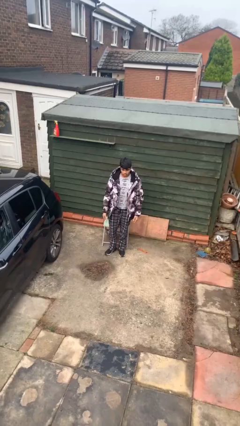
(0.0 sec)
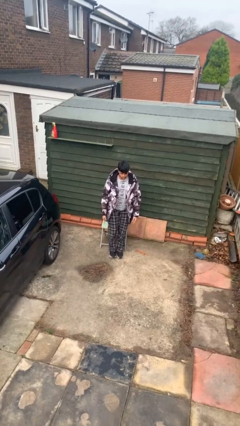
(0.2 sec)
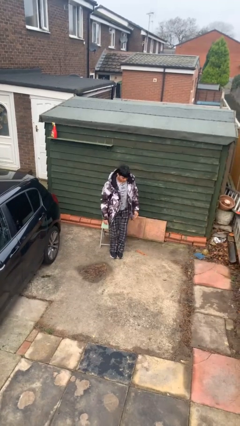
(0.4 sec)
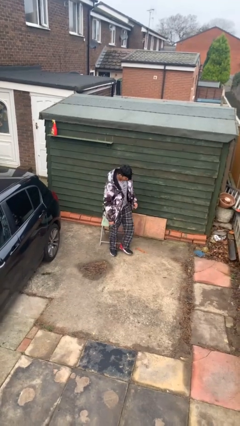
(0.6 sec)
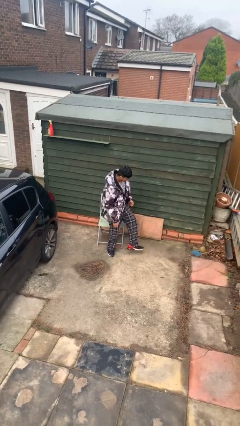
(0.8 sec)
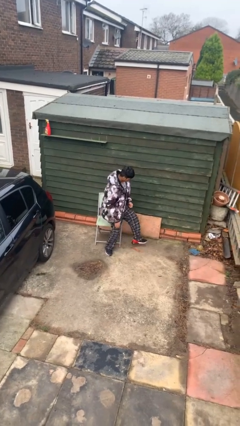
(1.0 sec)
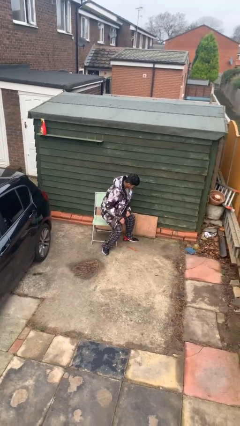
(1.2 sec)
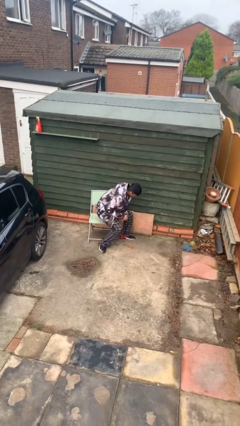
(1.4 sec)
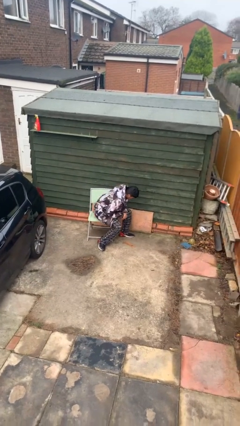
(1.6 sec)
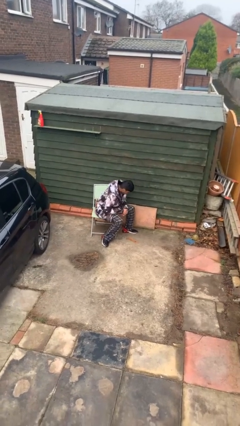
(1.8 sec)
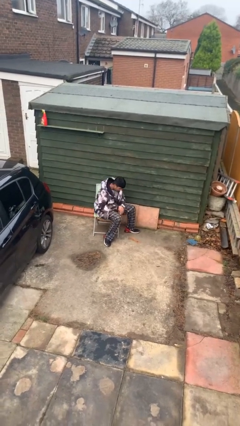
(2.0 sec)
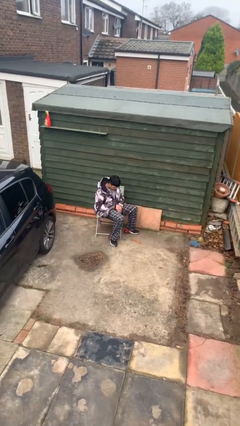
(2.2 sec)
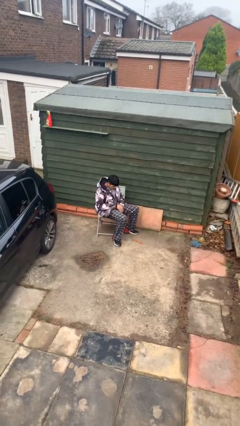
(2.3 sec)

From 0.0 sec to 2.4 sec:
person sits down

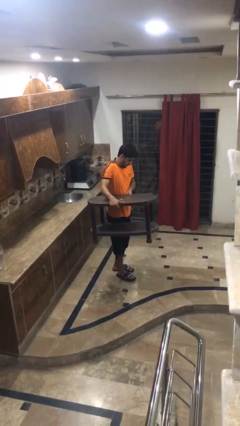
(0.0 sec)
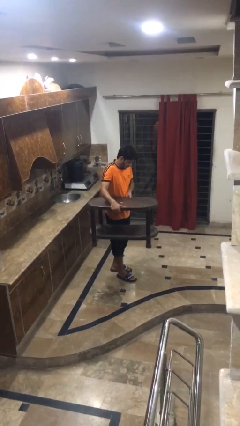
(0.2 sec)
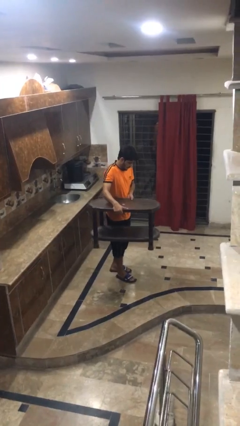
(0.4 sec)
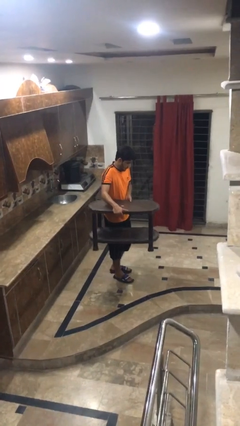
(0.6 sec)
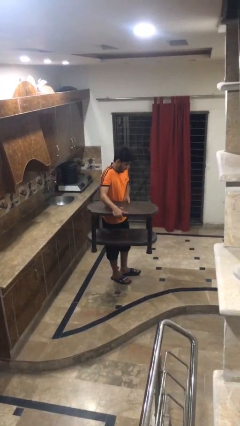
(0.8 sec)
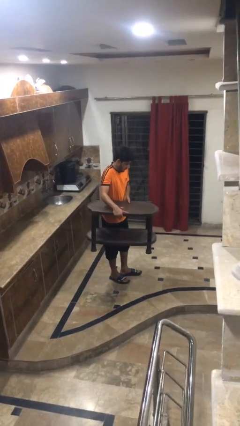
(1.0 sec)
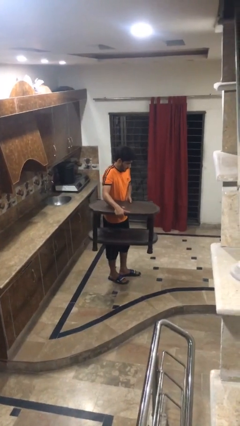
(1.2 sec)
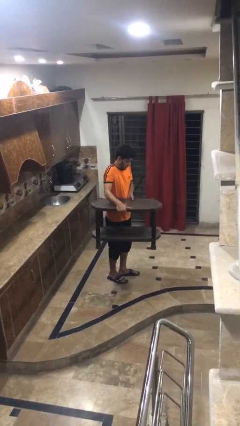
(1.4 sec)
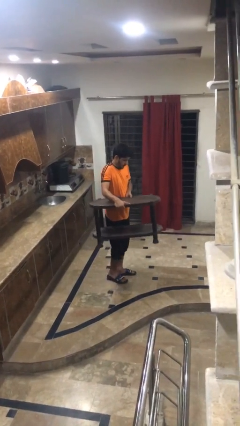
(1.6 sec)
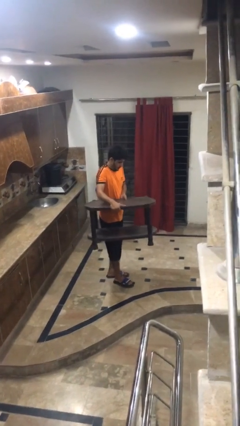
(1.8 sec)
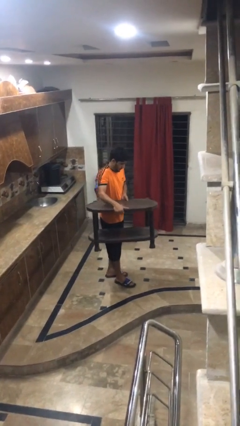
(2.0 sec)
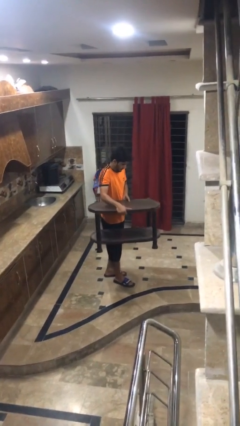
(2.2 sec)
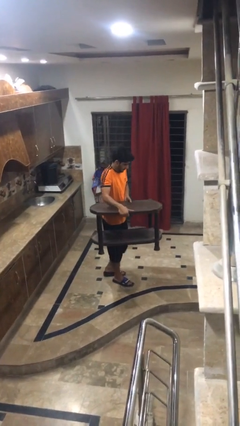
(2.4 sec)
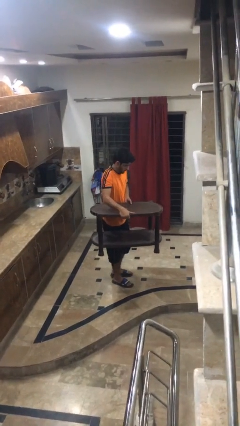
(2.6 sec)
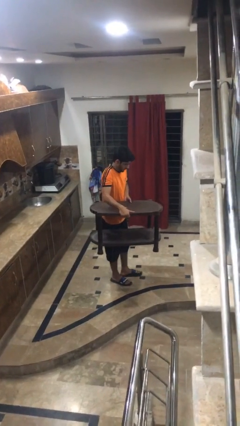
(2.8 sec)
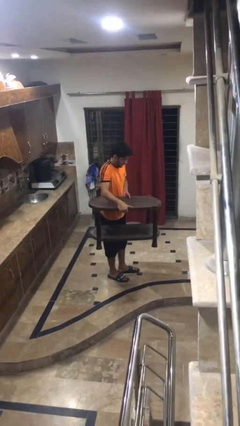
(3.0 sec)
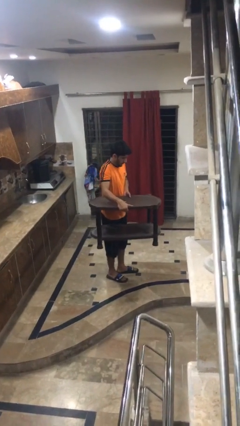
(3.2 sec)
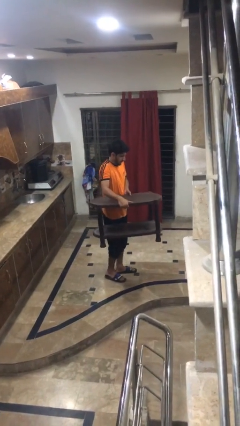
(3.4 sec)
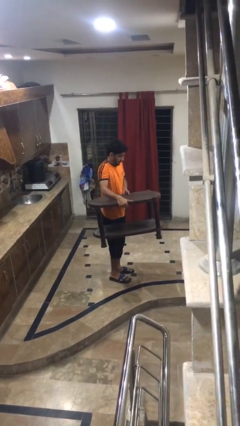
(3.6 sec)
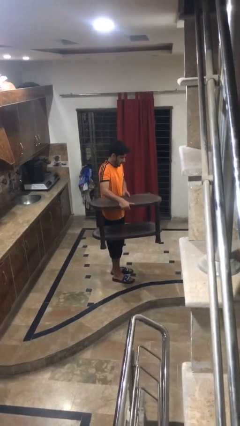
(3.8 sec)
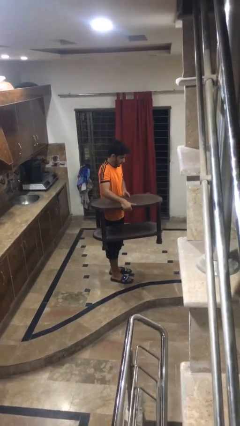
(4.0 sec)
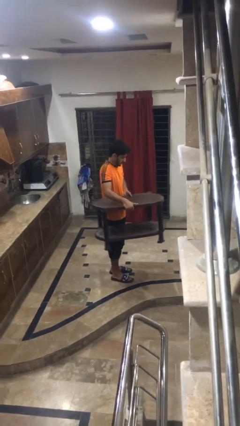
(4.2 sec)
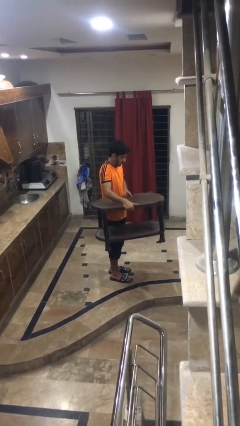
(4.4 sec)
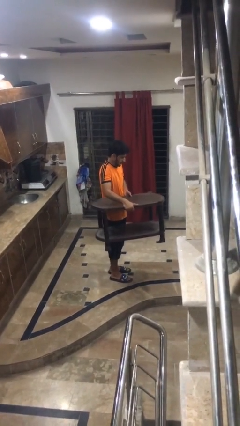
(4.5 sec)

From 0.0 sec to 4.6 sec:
person carries furniture

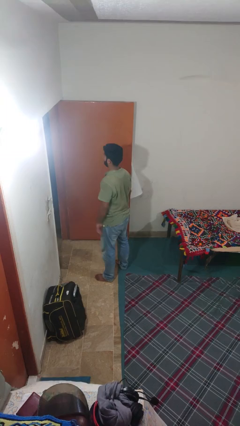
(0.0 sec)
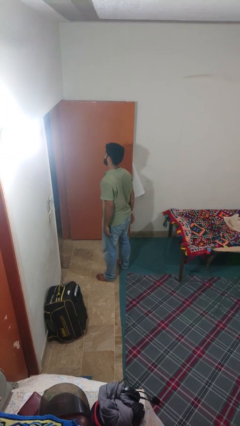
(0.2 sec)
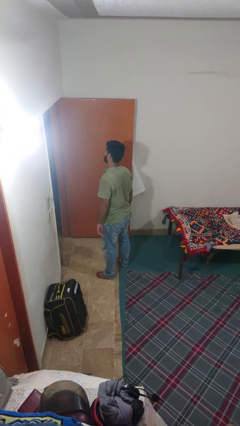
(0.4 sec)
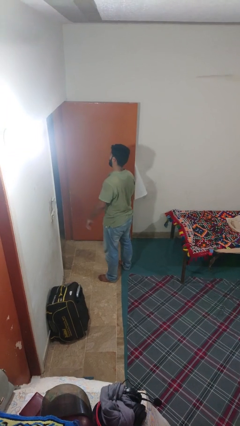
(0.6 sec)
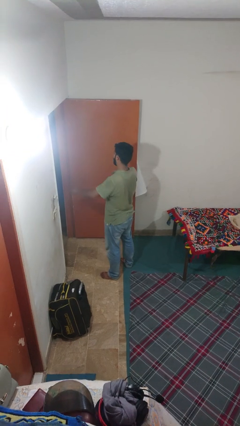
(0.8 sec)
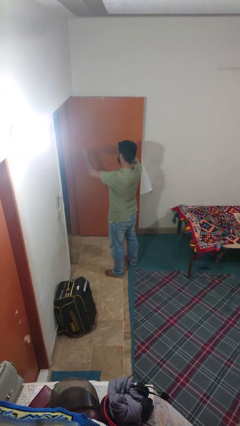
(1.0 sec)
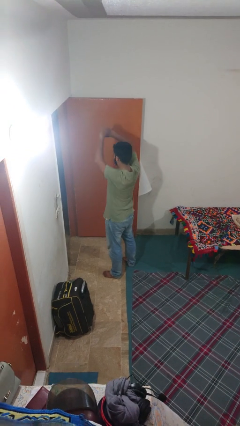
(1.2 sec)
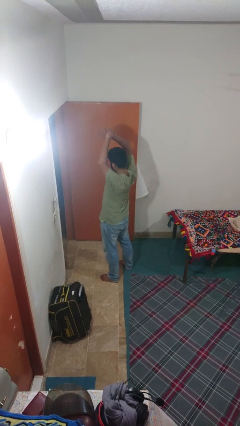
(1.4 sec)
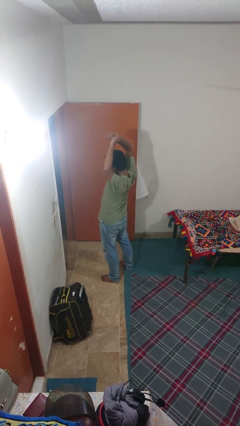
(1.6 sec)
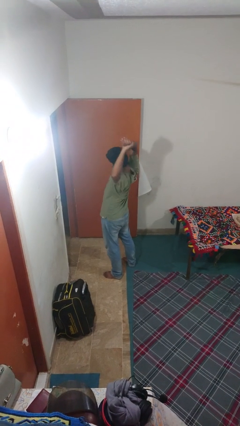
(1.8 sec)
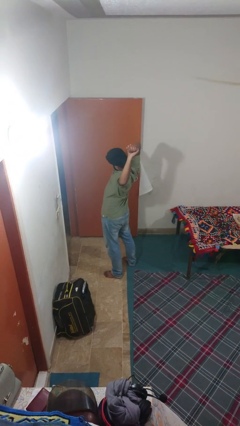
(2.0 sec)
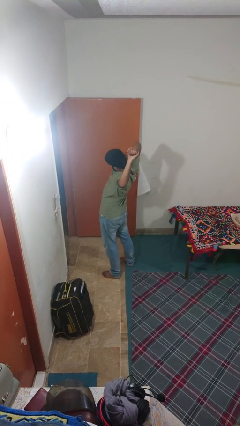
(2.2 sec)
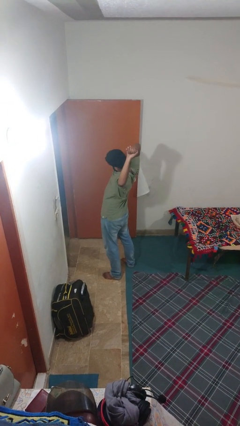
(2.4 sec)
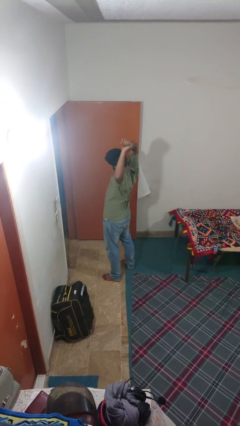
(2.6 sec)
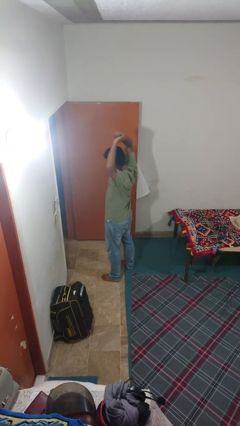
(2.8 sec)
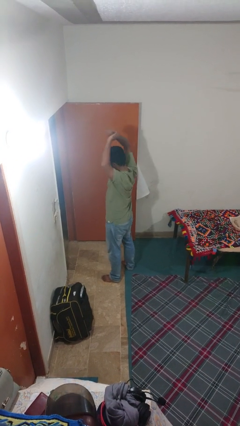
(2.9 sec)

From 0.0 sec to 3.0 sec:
person stretches arms over head

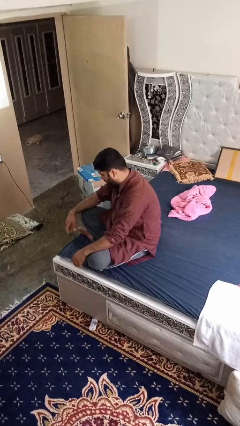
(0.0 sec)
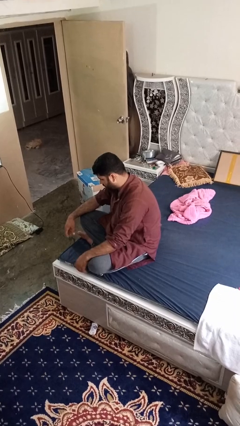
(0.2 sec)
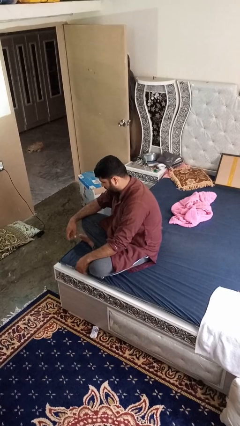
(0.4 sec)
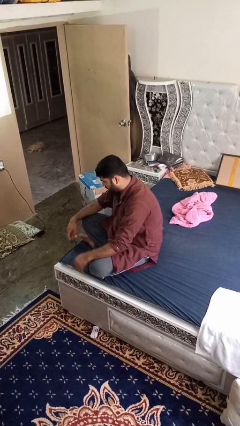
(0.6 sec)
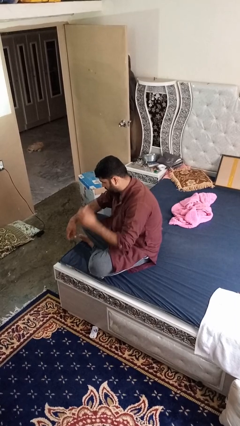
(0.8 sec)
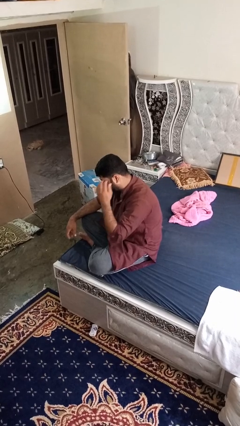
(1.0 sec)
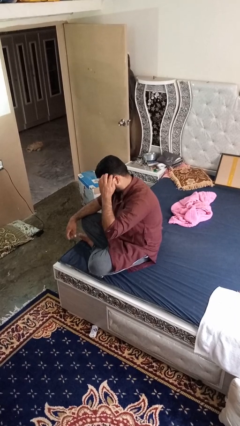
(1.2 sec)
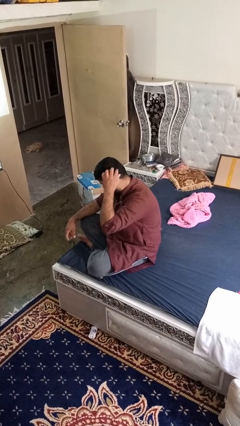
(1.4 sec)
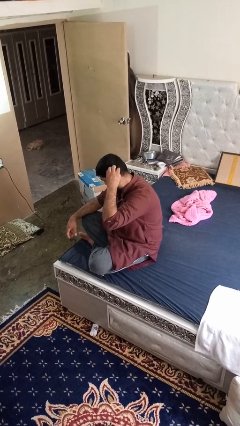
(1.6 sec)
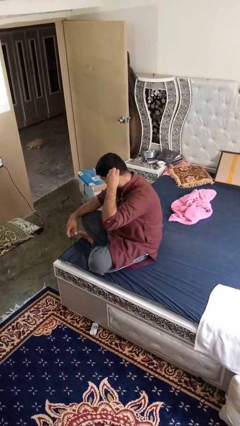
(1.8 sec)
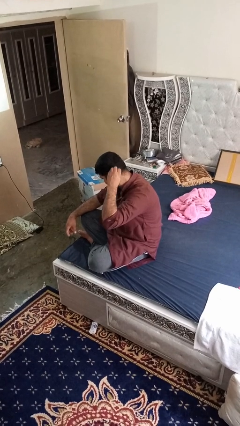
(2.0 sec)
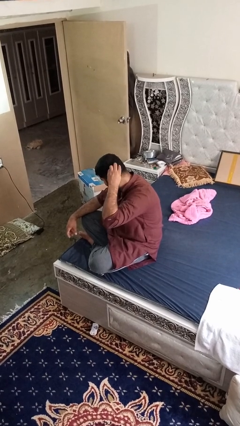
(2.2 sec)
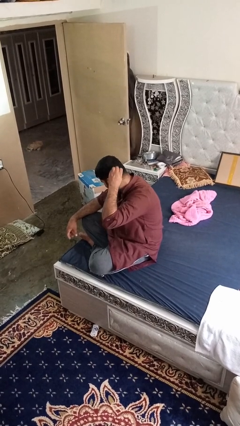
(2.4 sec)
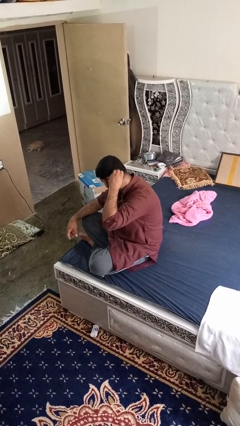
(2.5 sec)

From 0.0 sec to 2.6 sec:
person strokes hair

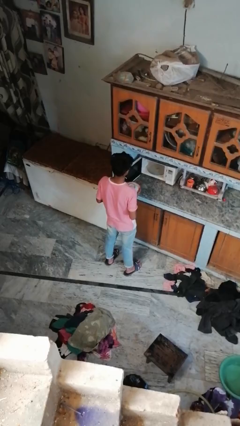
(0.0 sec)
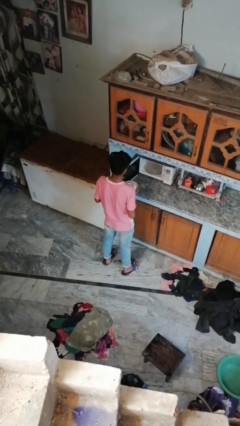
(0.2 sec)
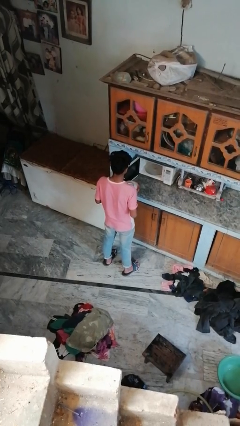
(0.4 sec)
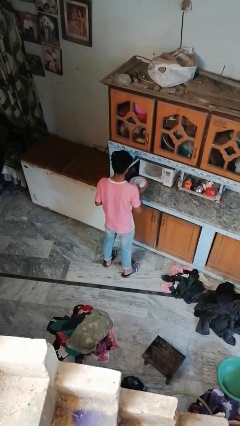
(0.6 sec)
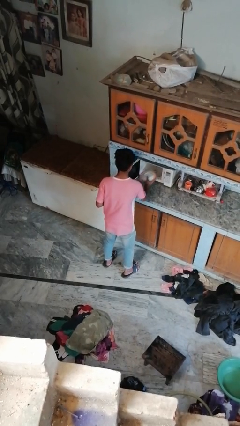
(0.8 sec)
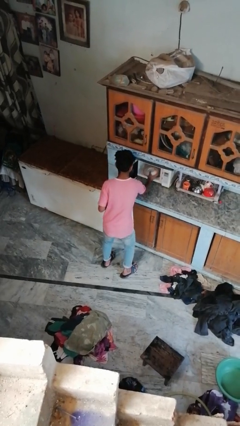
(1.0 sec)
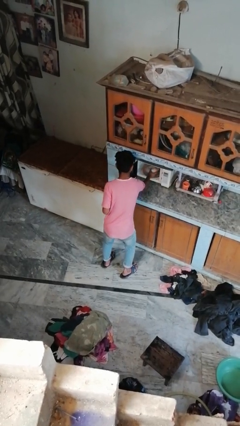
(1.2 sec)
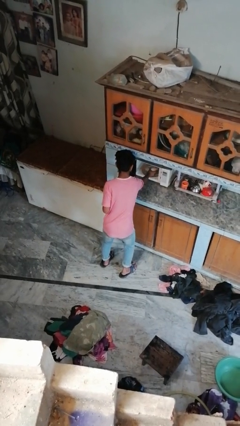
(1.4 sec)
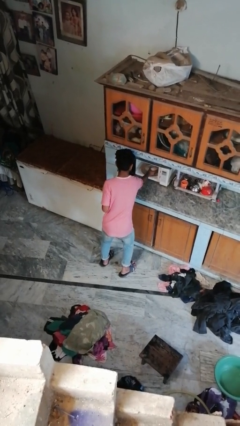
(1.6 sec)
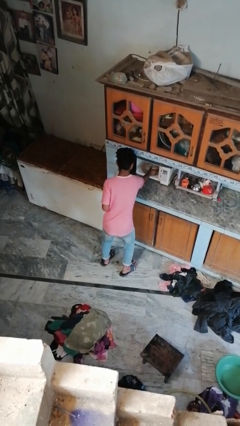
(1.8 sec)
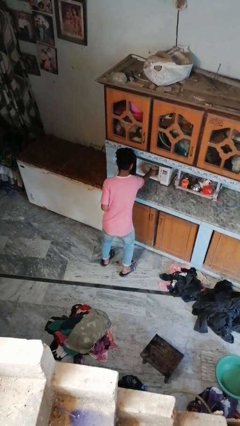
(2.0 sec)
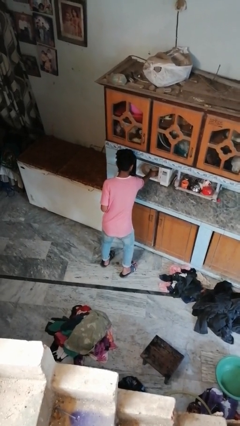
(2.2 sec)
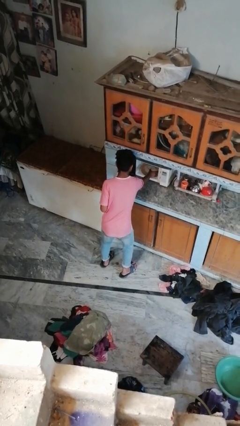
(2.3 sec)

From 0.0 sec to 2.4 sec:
person puts object into oven

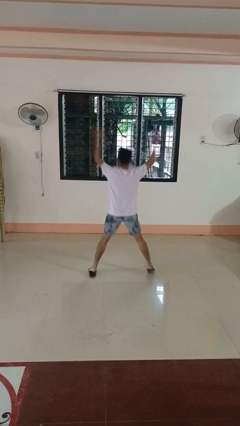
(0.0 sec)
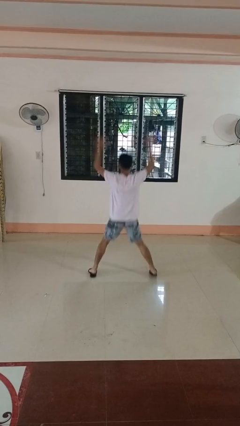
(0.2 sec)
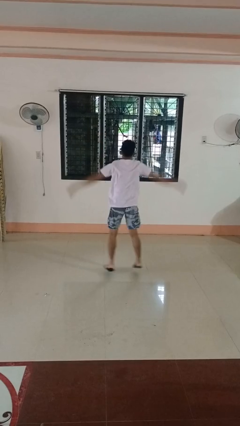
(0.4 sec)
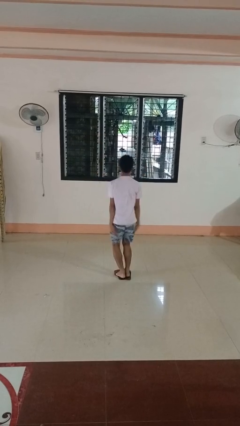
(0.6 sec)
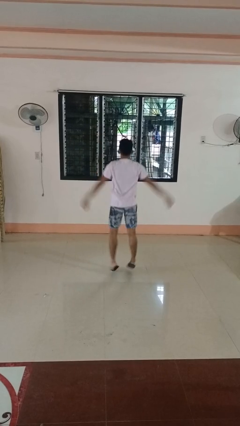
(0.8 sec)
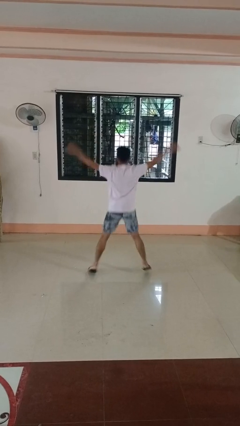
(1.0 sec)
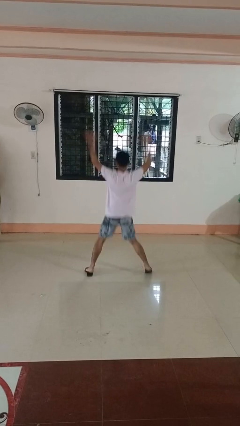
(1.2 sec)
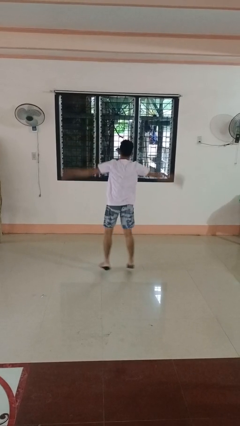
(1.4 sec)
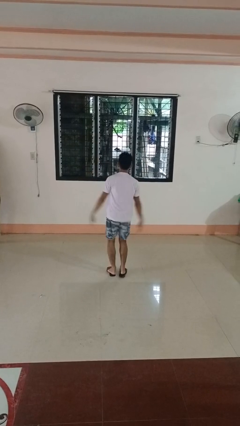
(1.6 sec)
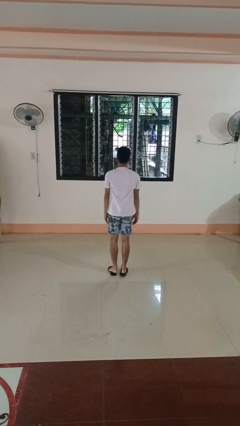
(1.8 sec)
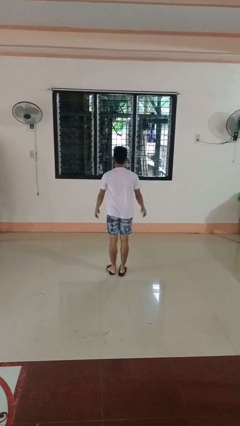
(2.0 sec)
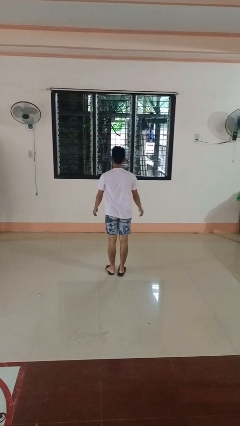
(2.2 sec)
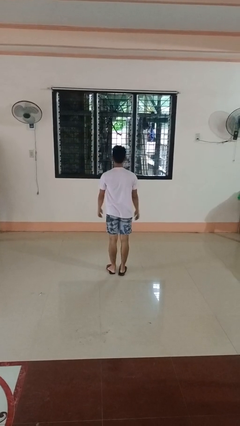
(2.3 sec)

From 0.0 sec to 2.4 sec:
person exercises with jumping jacks
